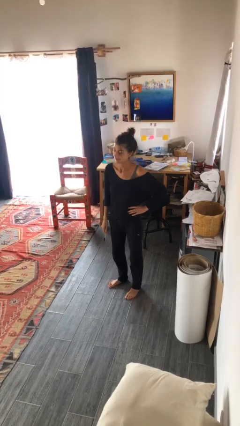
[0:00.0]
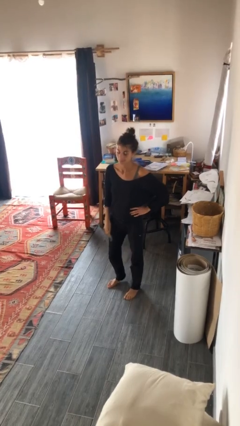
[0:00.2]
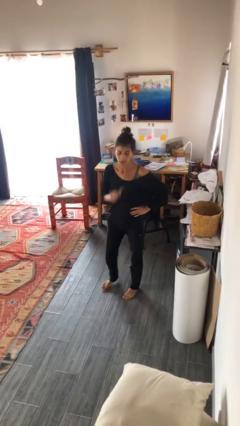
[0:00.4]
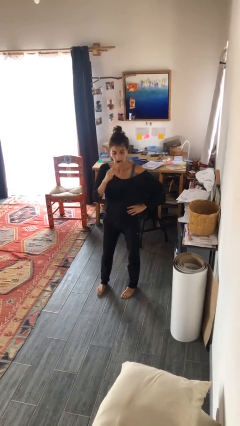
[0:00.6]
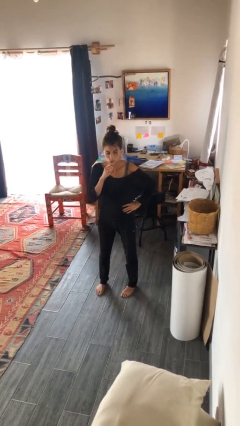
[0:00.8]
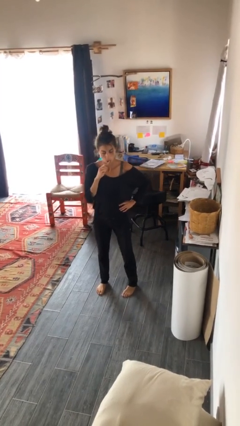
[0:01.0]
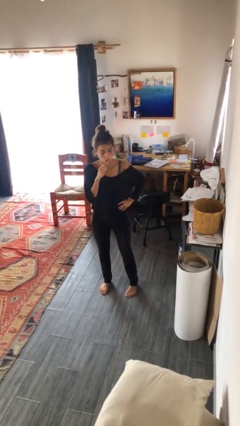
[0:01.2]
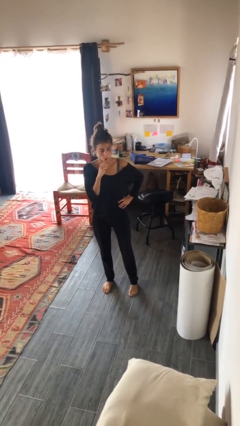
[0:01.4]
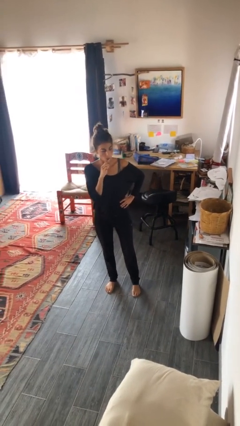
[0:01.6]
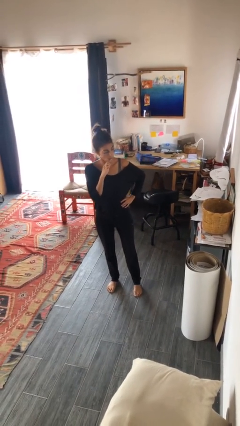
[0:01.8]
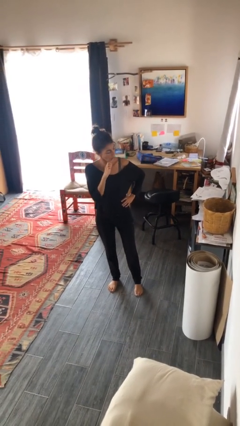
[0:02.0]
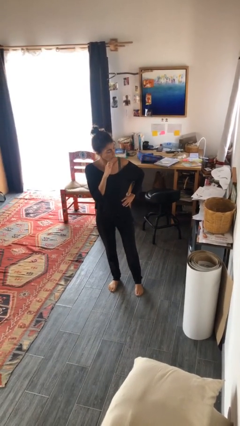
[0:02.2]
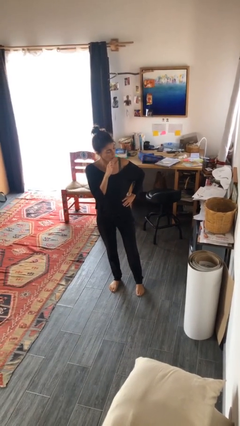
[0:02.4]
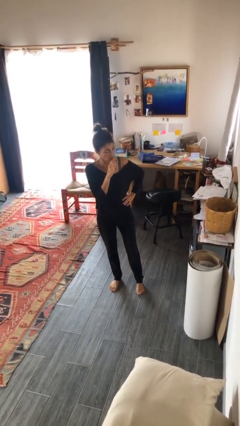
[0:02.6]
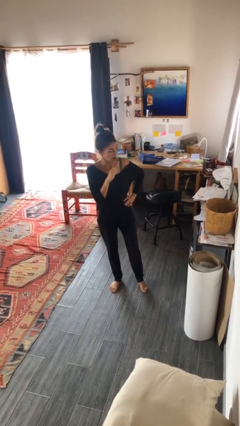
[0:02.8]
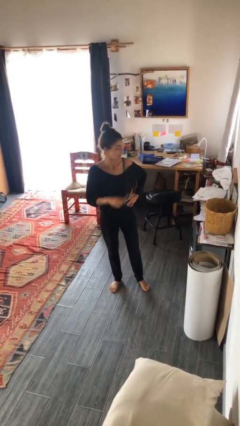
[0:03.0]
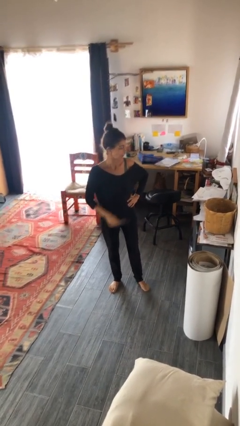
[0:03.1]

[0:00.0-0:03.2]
person brushes teeth

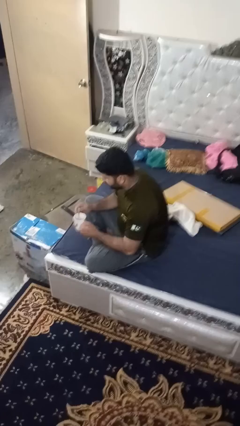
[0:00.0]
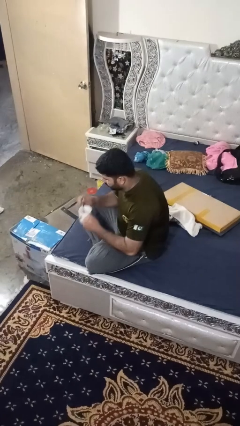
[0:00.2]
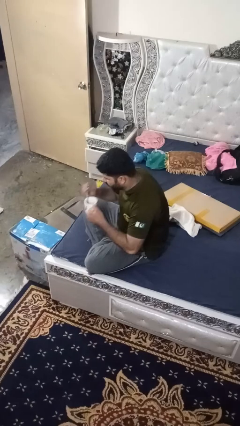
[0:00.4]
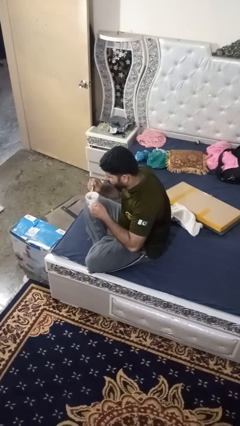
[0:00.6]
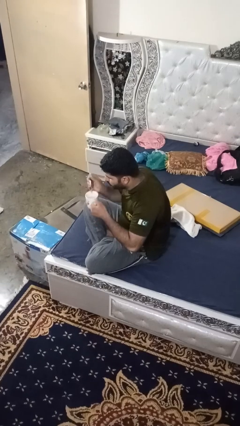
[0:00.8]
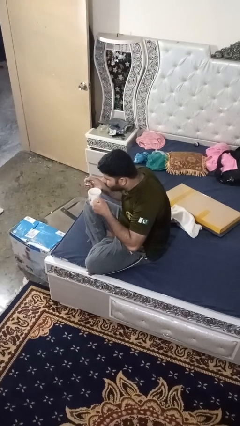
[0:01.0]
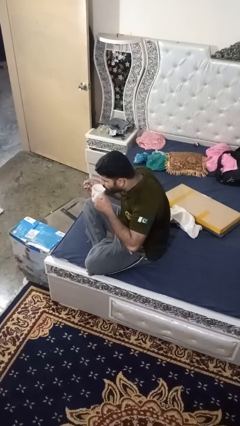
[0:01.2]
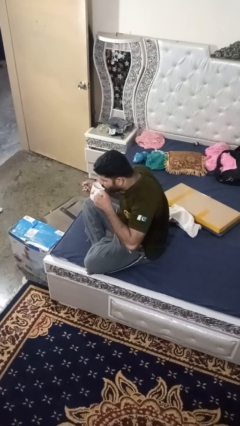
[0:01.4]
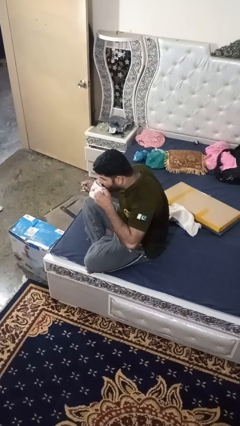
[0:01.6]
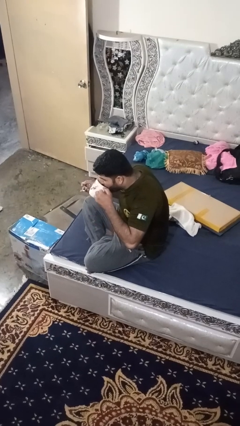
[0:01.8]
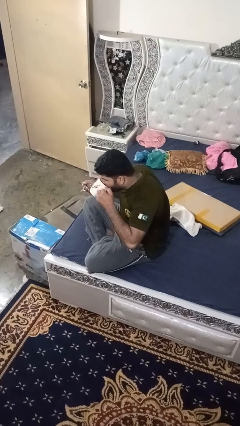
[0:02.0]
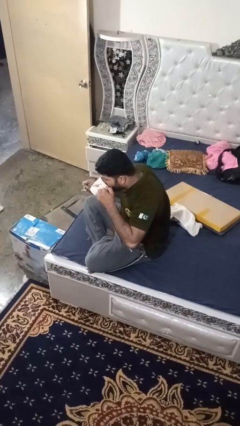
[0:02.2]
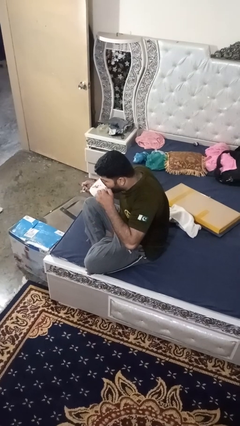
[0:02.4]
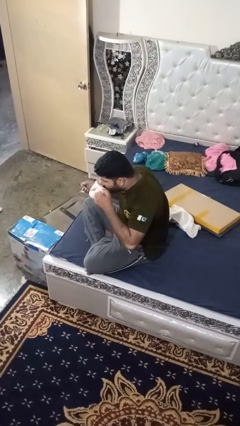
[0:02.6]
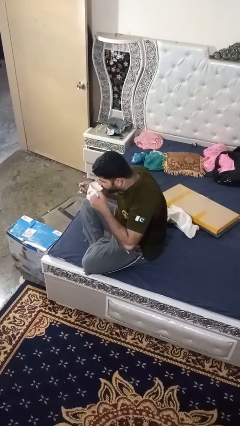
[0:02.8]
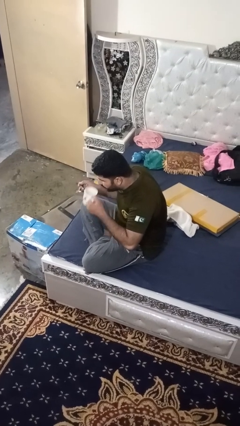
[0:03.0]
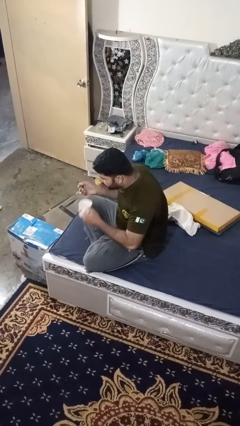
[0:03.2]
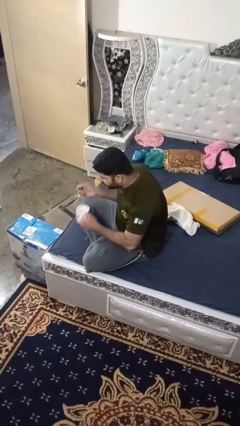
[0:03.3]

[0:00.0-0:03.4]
person drinks from mug

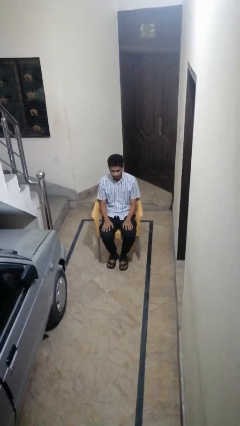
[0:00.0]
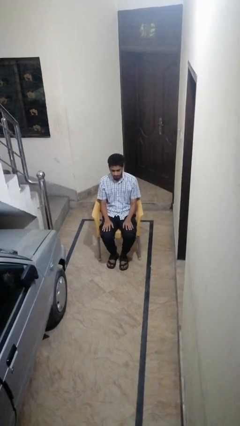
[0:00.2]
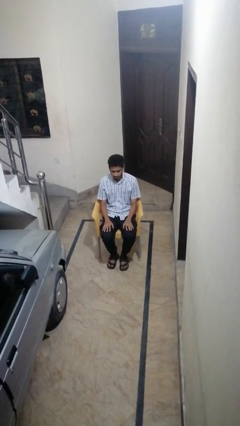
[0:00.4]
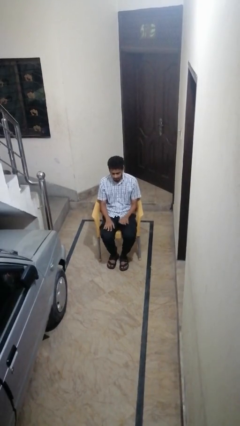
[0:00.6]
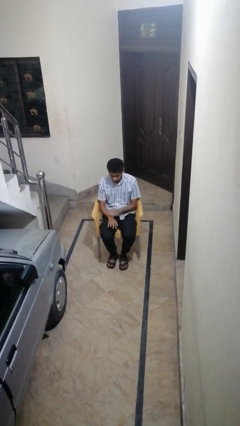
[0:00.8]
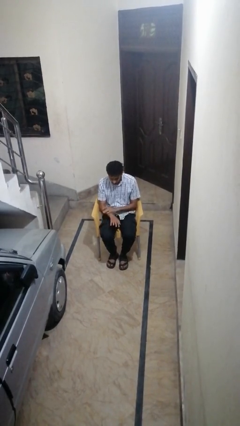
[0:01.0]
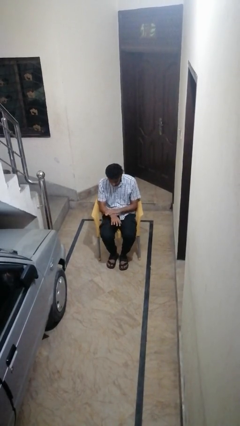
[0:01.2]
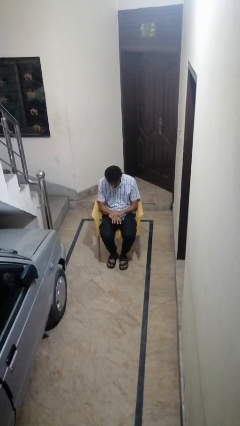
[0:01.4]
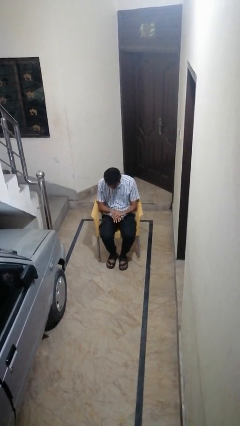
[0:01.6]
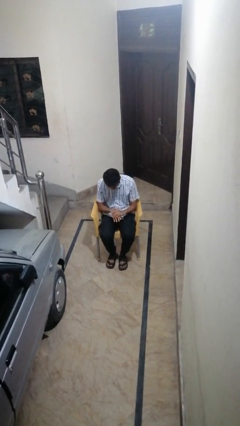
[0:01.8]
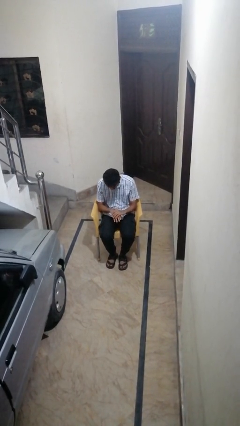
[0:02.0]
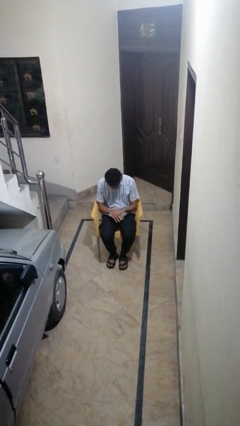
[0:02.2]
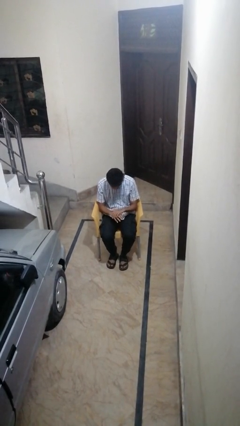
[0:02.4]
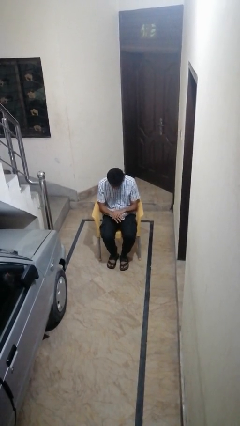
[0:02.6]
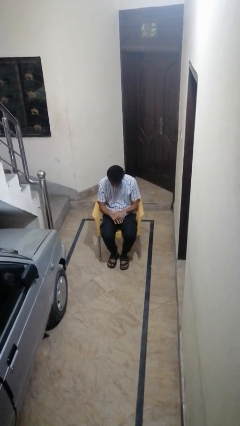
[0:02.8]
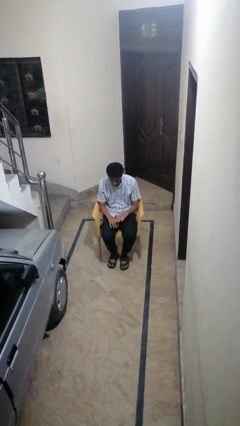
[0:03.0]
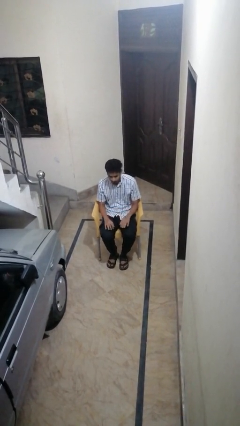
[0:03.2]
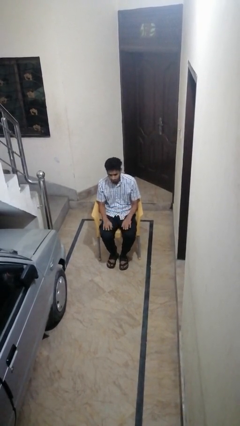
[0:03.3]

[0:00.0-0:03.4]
person looks at hands in lap

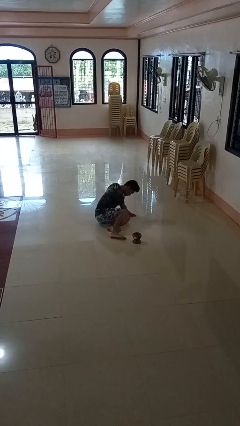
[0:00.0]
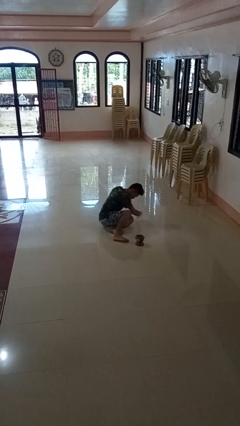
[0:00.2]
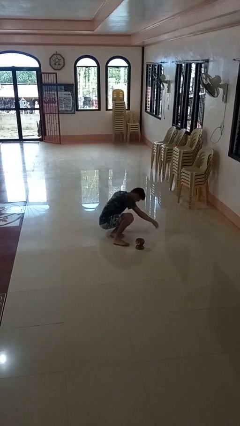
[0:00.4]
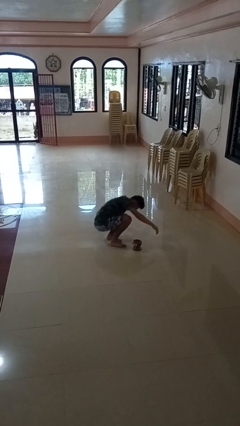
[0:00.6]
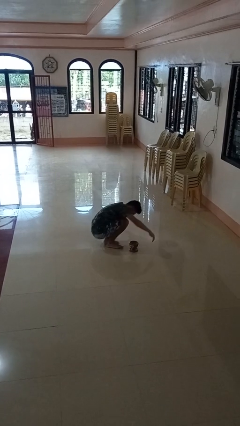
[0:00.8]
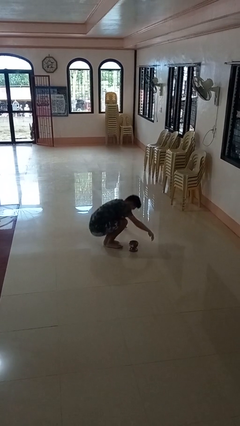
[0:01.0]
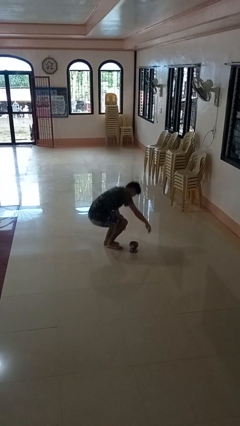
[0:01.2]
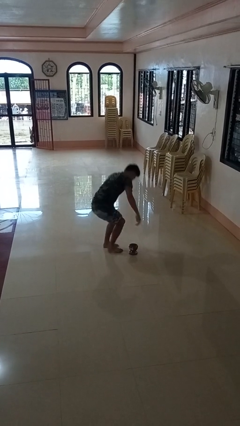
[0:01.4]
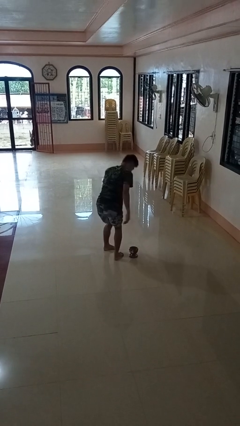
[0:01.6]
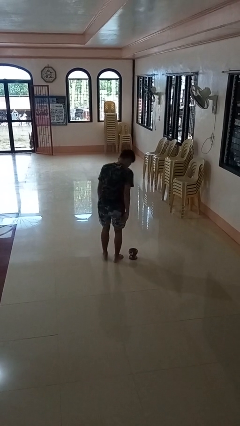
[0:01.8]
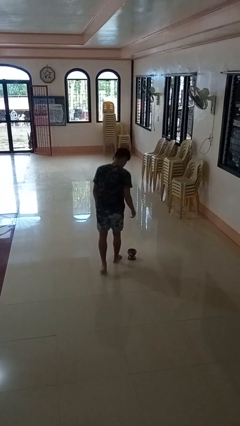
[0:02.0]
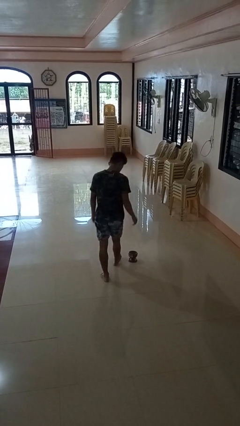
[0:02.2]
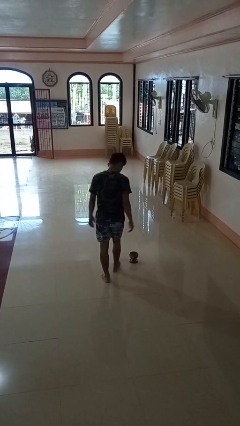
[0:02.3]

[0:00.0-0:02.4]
person stands up from floor

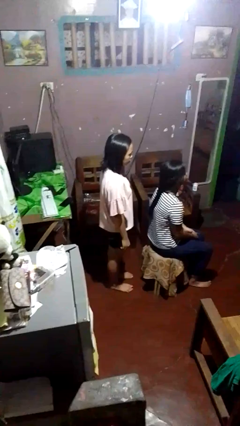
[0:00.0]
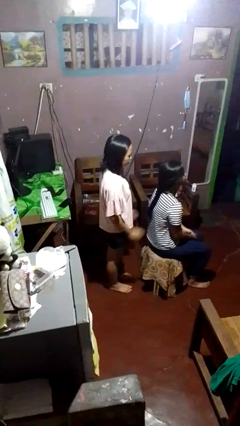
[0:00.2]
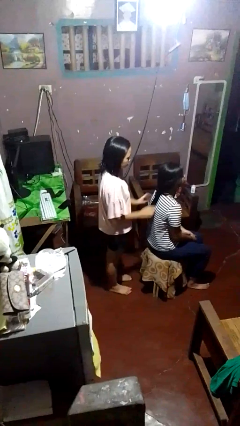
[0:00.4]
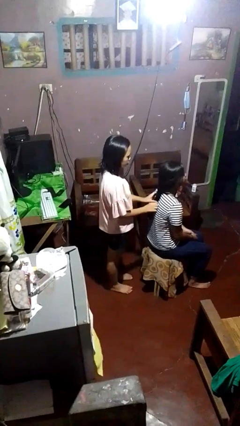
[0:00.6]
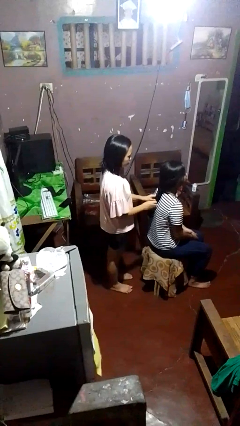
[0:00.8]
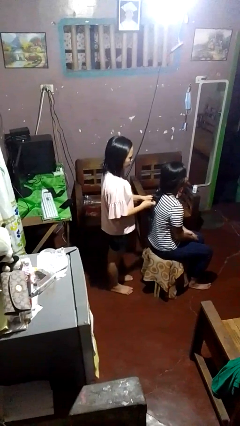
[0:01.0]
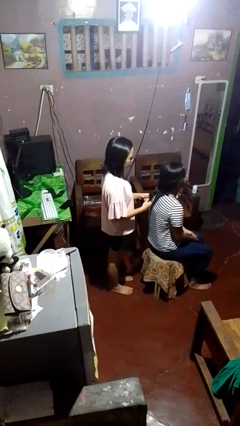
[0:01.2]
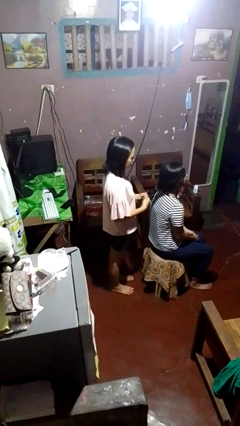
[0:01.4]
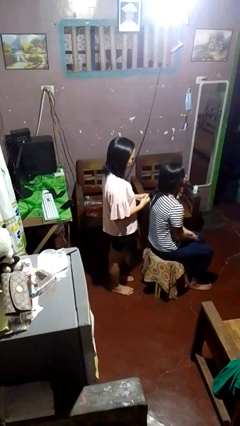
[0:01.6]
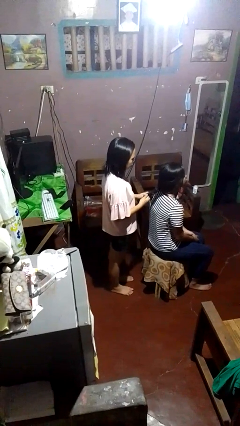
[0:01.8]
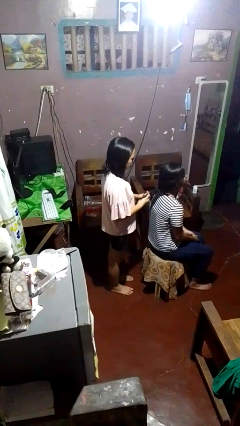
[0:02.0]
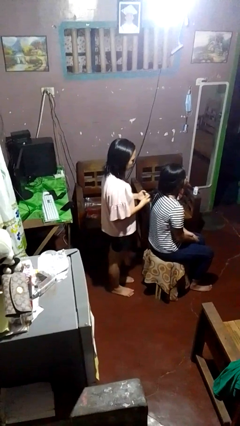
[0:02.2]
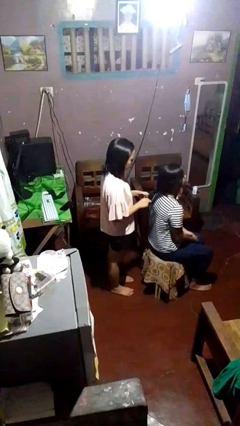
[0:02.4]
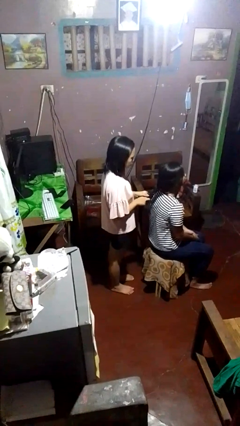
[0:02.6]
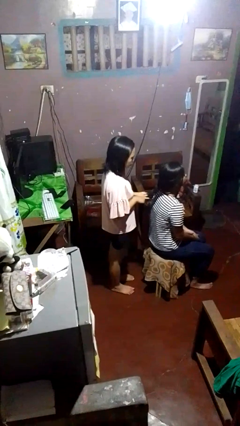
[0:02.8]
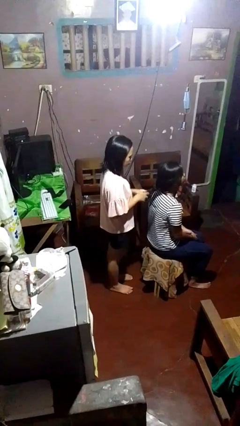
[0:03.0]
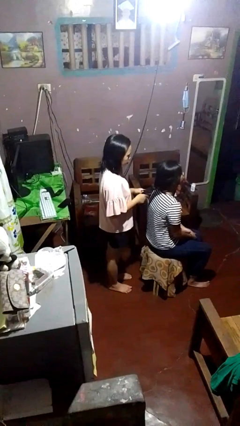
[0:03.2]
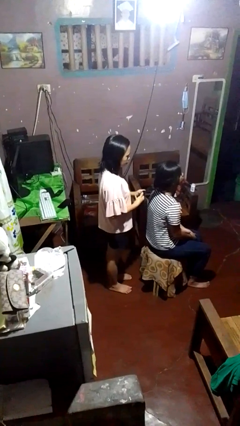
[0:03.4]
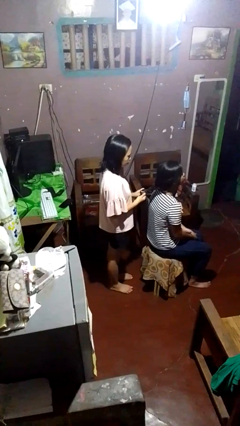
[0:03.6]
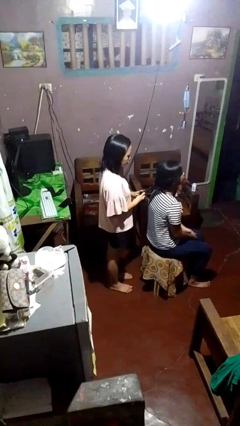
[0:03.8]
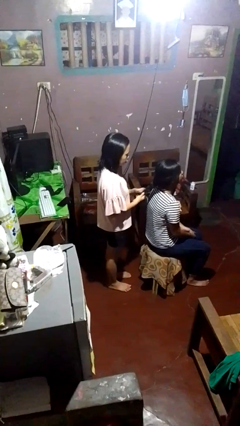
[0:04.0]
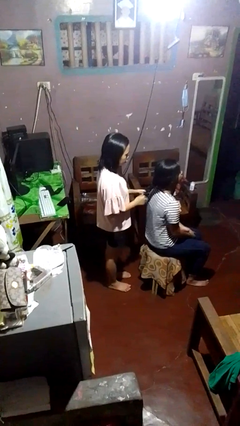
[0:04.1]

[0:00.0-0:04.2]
person braids hair of person

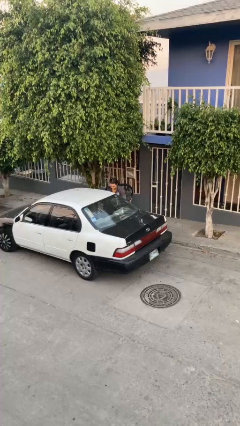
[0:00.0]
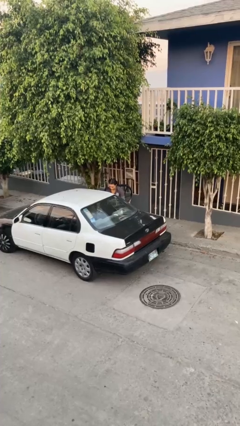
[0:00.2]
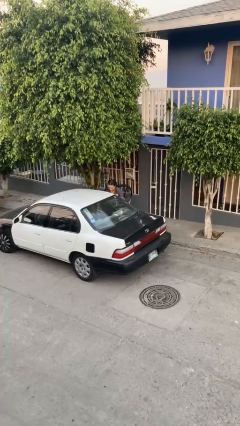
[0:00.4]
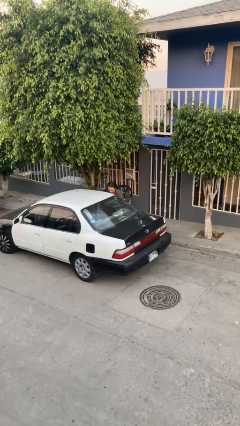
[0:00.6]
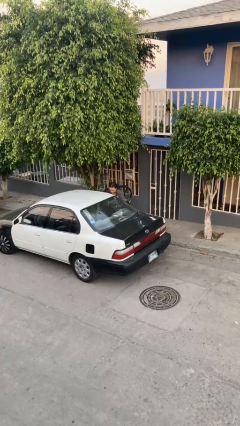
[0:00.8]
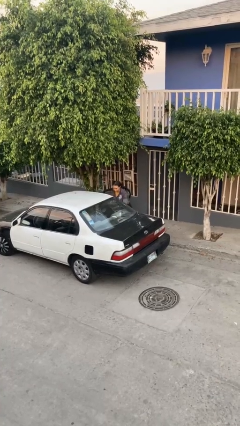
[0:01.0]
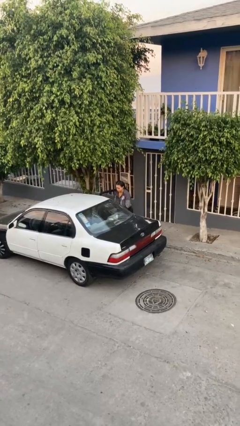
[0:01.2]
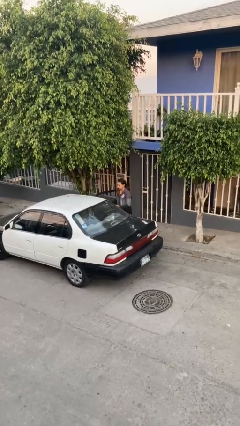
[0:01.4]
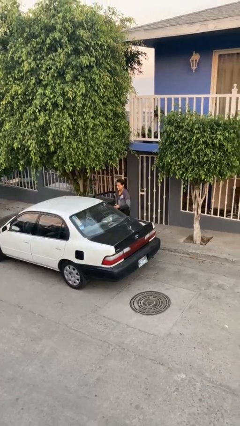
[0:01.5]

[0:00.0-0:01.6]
person unloads car
